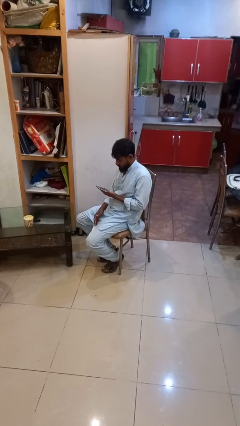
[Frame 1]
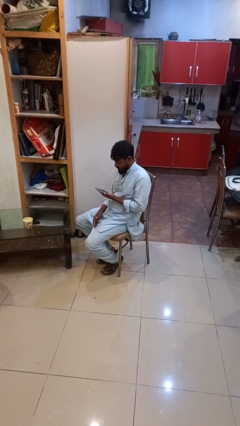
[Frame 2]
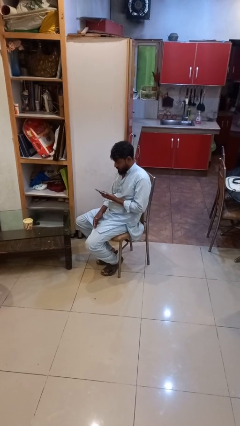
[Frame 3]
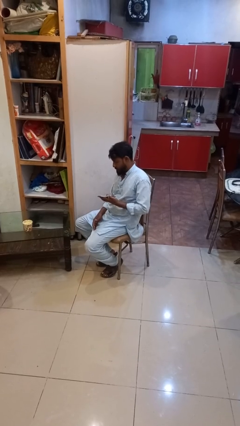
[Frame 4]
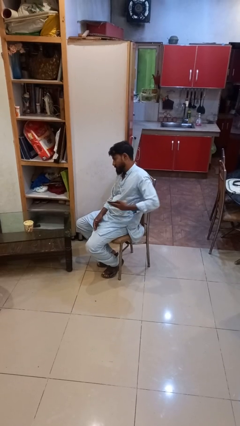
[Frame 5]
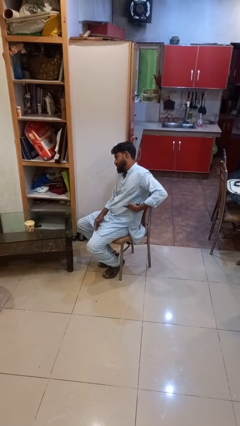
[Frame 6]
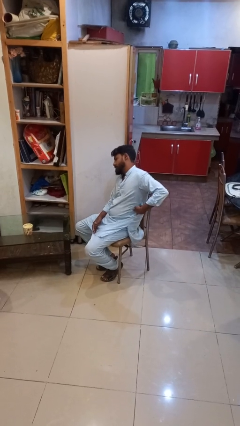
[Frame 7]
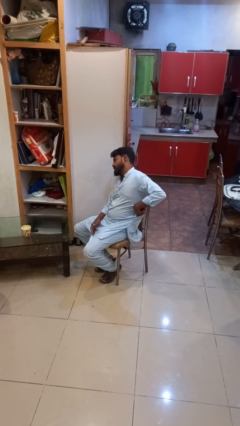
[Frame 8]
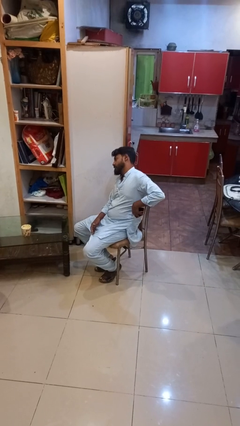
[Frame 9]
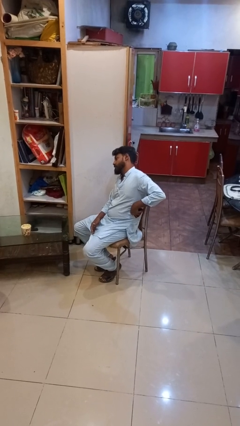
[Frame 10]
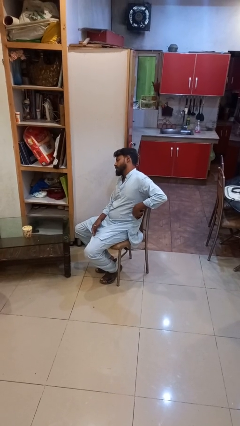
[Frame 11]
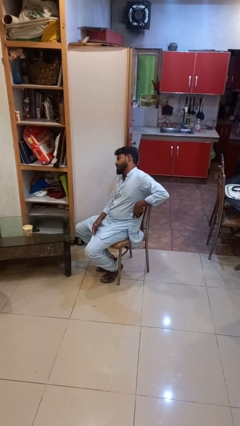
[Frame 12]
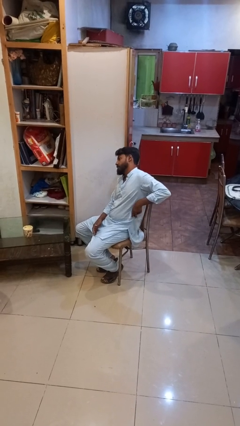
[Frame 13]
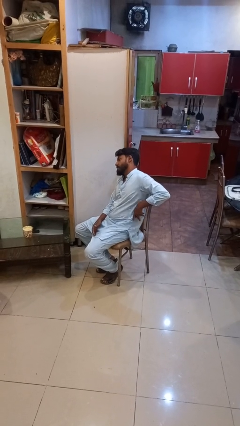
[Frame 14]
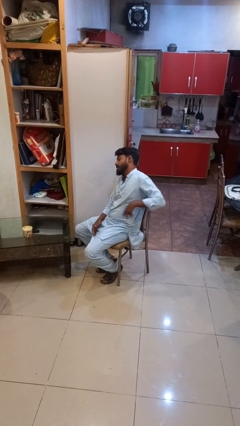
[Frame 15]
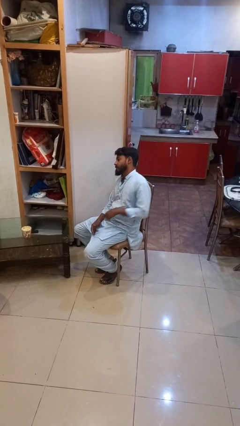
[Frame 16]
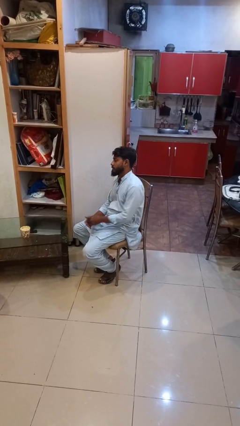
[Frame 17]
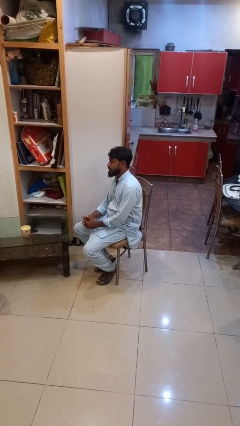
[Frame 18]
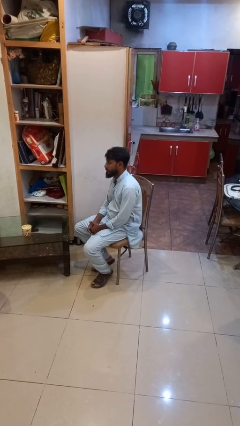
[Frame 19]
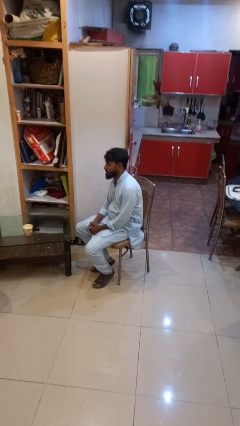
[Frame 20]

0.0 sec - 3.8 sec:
person puts phone into pocket

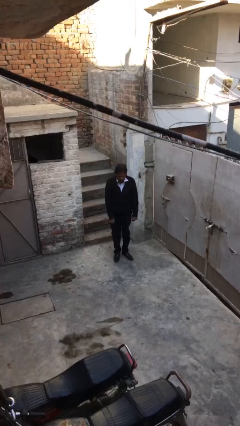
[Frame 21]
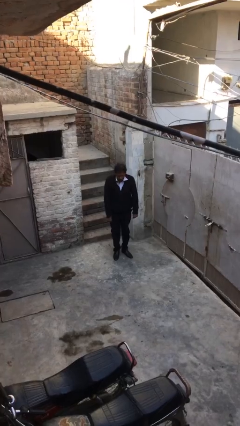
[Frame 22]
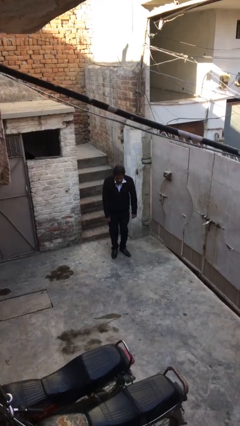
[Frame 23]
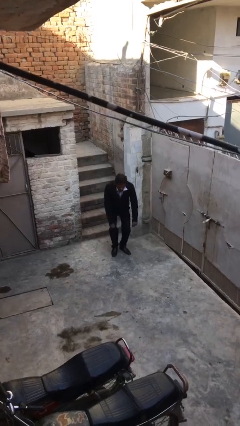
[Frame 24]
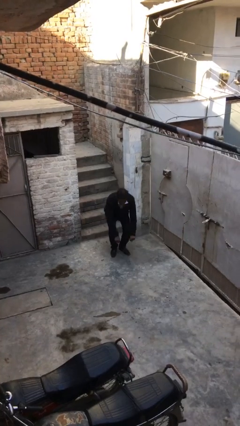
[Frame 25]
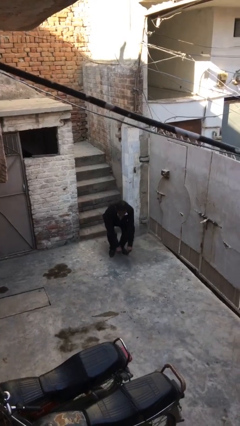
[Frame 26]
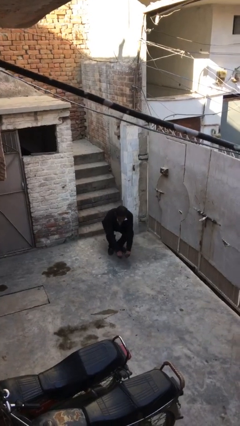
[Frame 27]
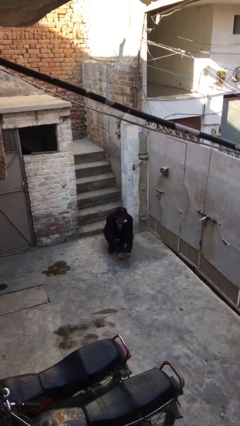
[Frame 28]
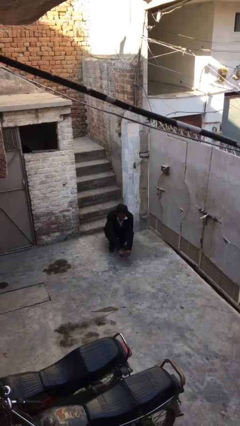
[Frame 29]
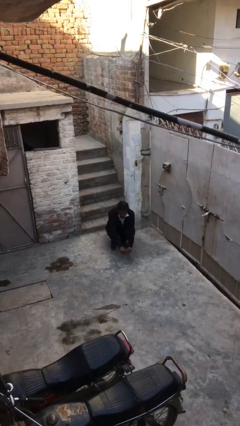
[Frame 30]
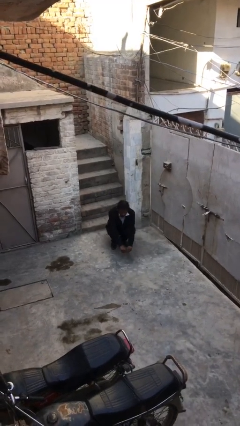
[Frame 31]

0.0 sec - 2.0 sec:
person sits down

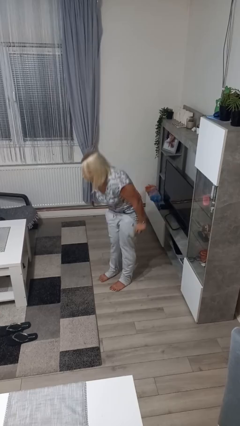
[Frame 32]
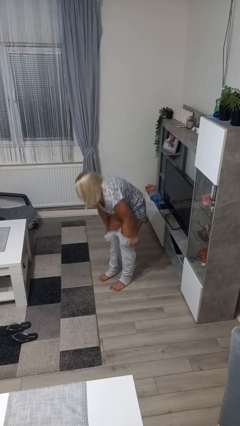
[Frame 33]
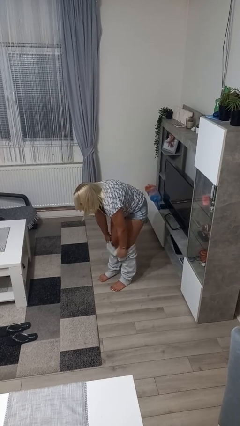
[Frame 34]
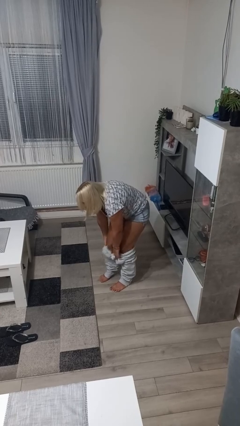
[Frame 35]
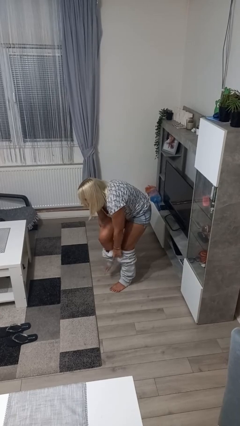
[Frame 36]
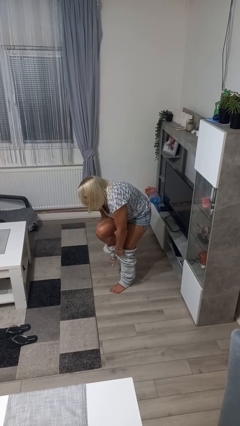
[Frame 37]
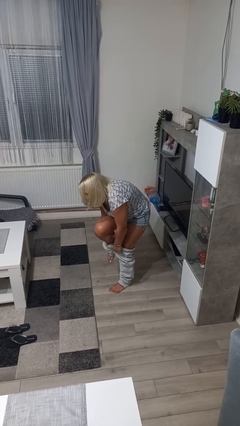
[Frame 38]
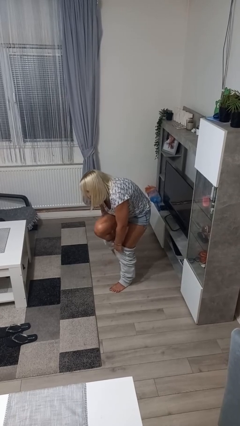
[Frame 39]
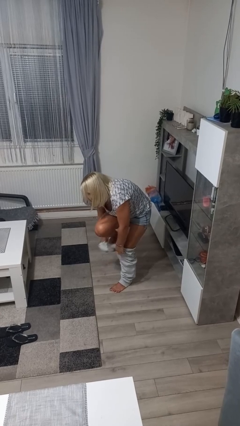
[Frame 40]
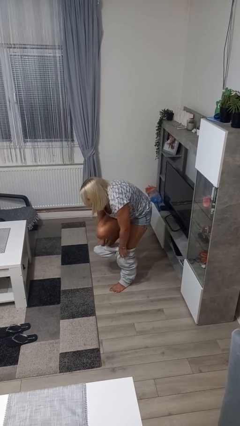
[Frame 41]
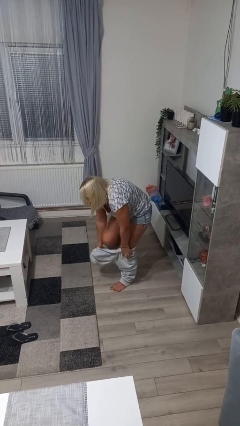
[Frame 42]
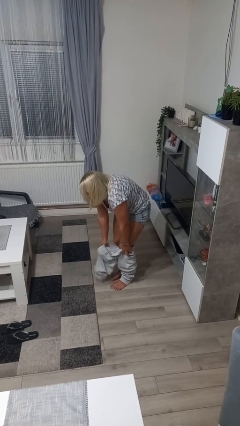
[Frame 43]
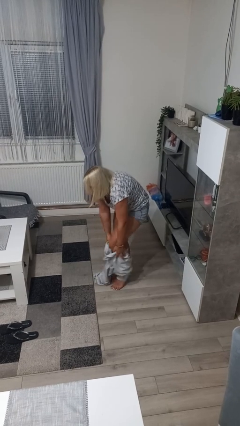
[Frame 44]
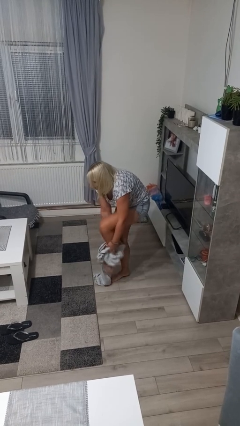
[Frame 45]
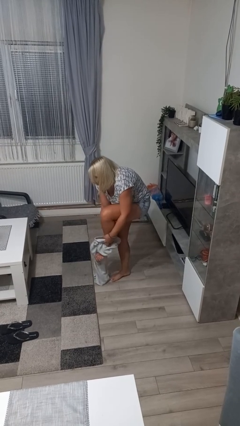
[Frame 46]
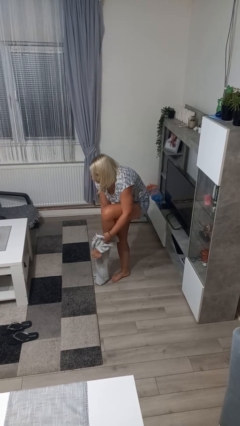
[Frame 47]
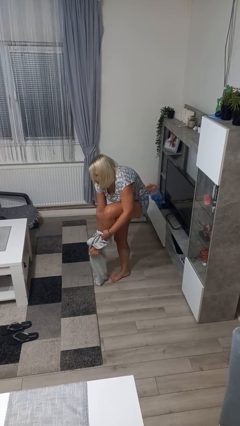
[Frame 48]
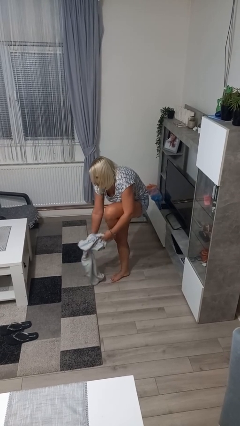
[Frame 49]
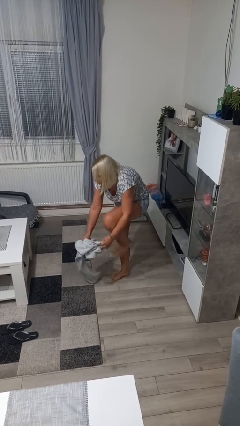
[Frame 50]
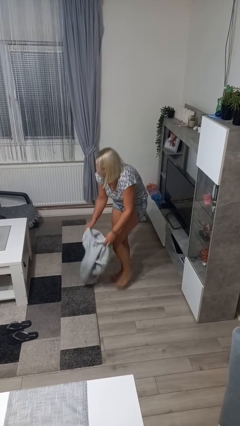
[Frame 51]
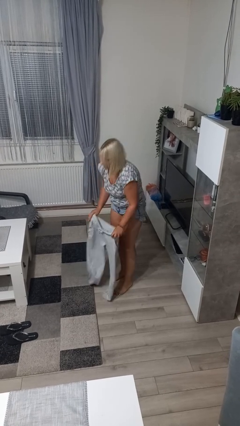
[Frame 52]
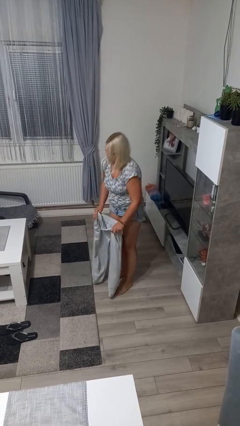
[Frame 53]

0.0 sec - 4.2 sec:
person takes off pants

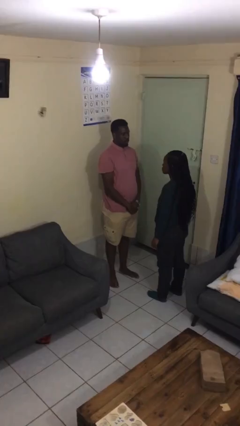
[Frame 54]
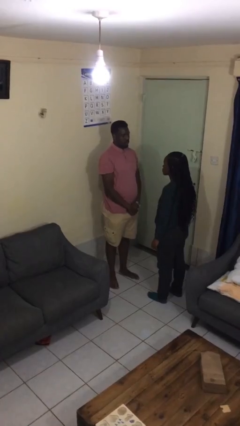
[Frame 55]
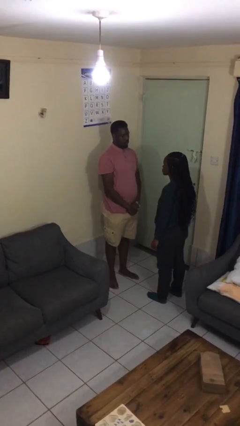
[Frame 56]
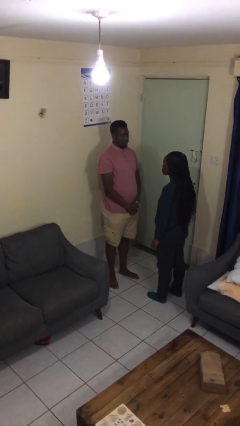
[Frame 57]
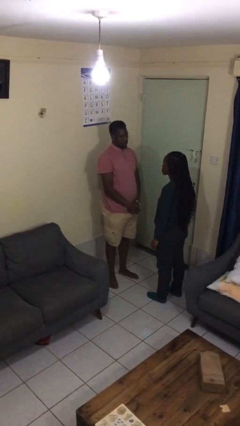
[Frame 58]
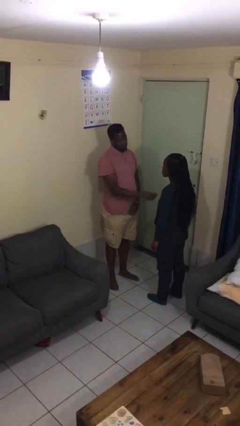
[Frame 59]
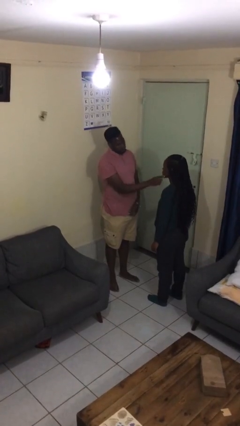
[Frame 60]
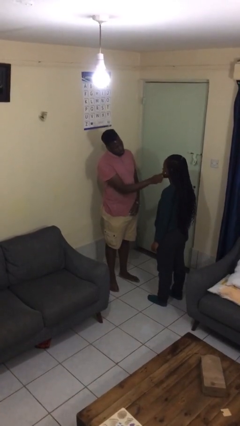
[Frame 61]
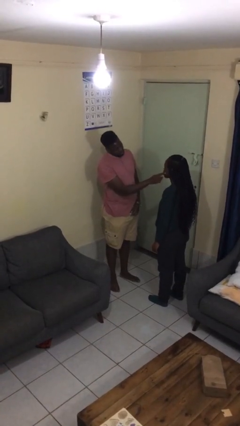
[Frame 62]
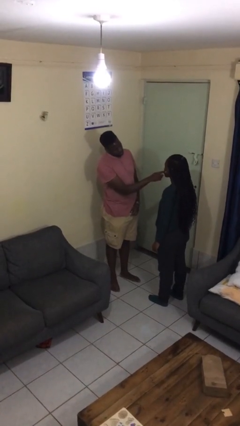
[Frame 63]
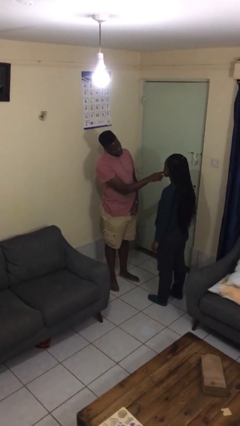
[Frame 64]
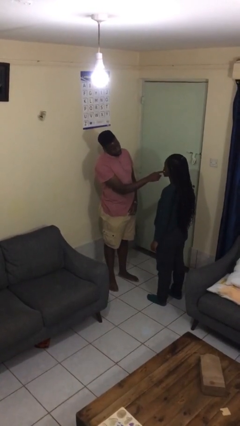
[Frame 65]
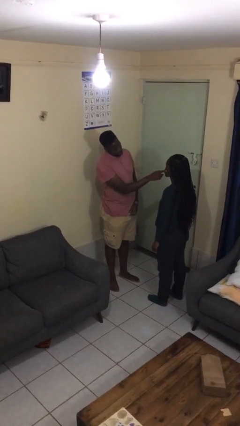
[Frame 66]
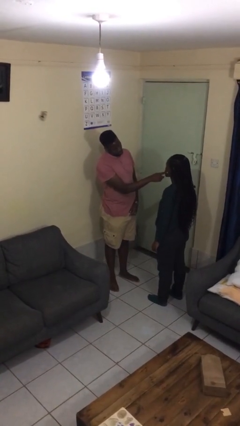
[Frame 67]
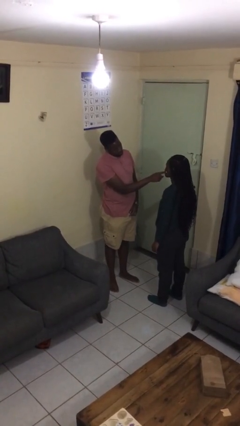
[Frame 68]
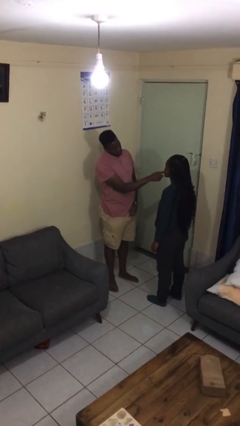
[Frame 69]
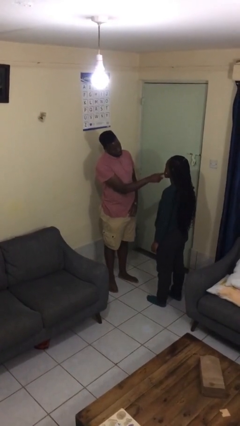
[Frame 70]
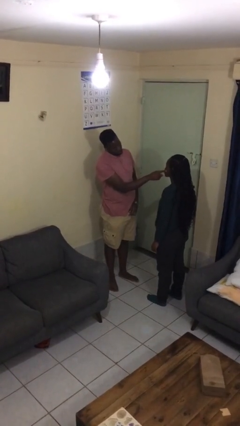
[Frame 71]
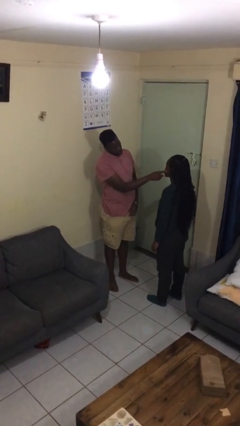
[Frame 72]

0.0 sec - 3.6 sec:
person touches face of person

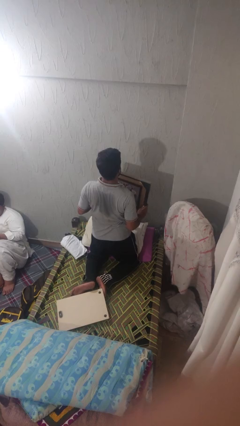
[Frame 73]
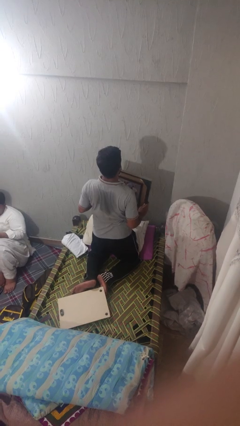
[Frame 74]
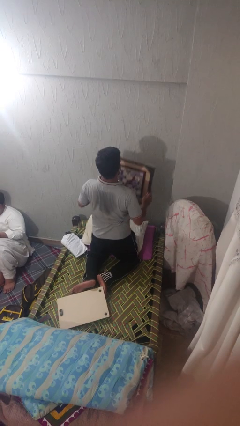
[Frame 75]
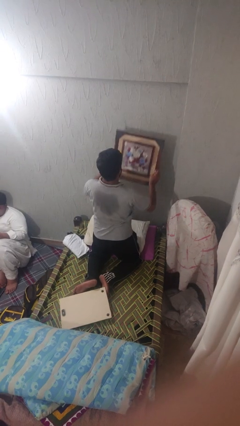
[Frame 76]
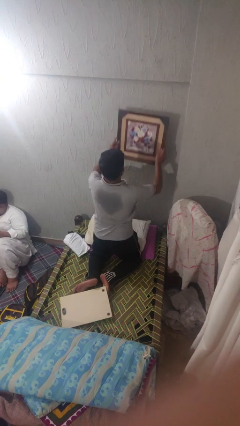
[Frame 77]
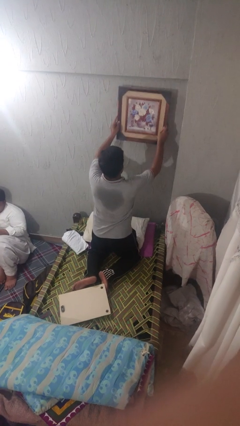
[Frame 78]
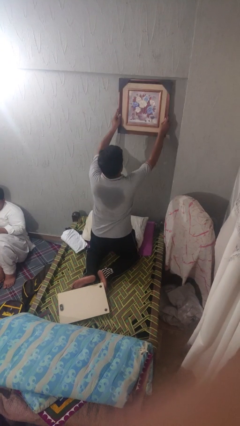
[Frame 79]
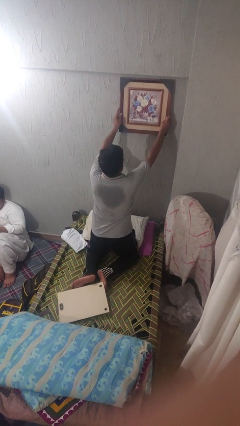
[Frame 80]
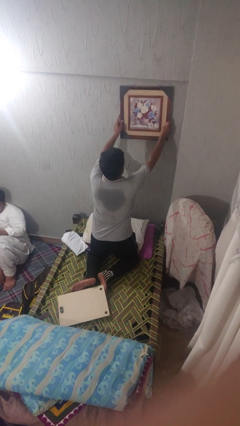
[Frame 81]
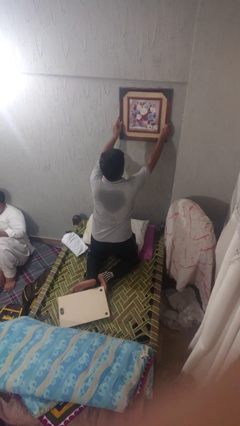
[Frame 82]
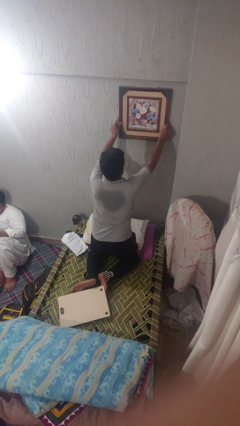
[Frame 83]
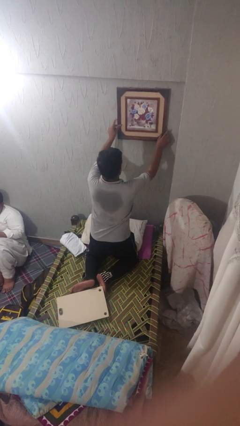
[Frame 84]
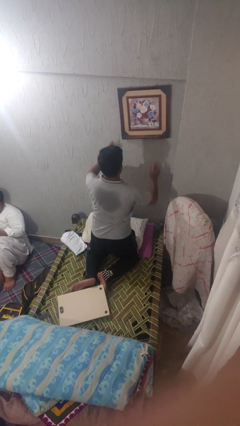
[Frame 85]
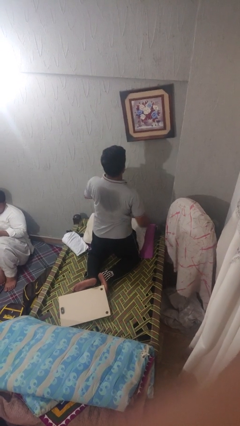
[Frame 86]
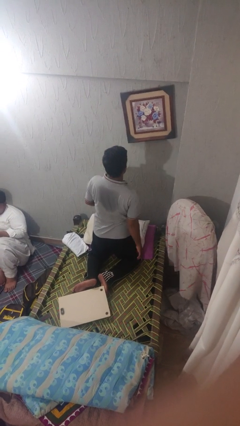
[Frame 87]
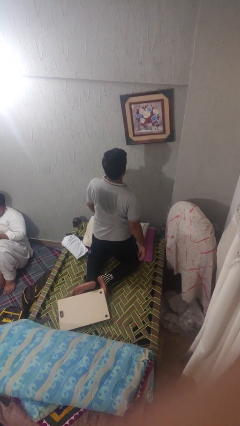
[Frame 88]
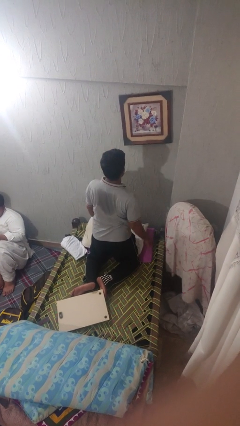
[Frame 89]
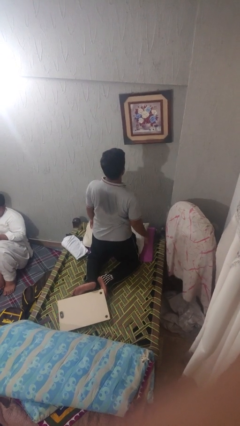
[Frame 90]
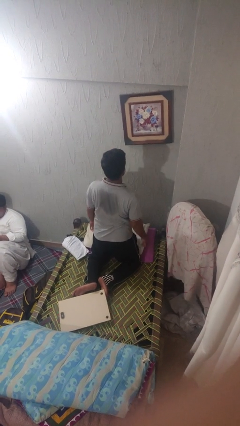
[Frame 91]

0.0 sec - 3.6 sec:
person puts up picture frame

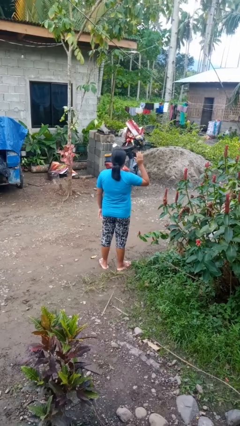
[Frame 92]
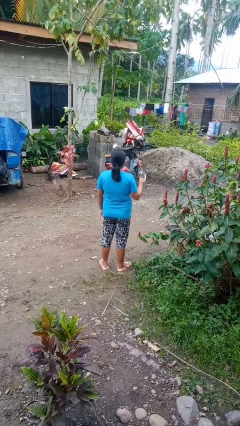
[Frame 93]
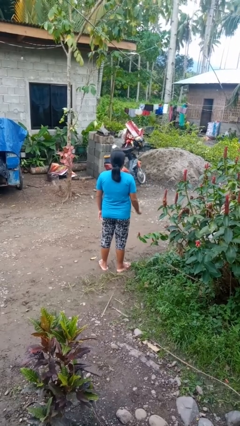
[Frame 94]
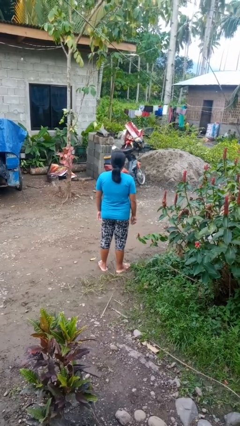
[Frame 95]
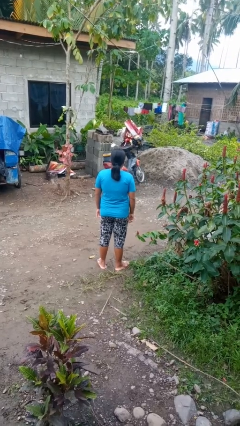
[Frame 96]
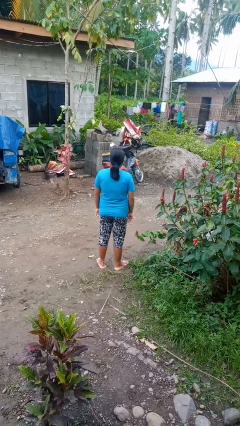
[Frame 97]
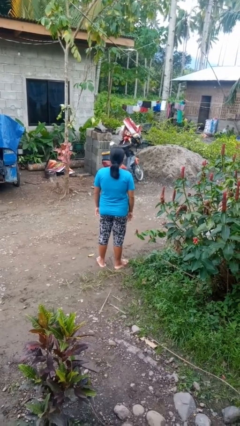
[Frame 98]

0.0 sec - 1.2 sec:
person gestures lower hand
